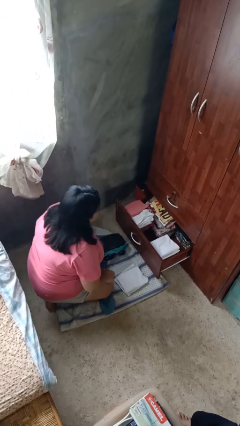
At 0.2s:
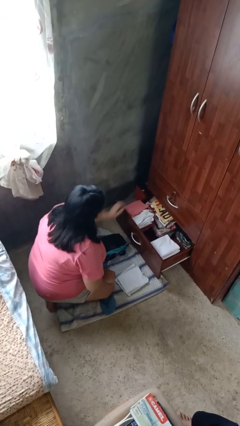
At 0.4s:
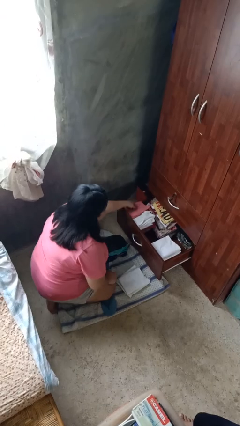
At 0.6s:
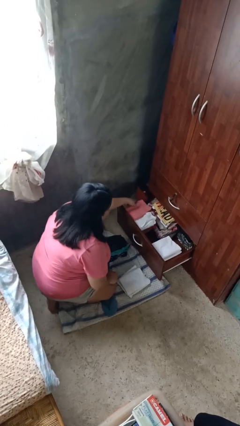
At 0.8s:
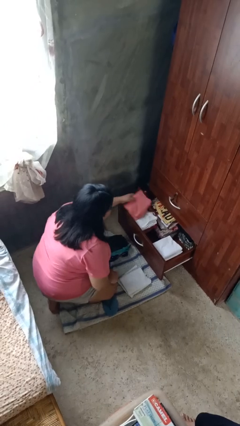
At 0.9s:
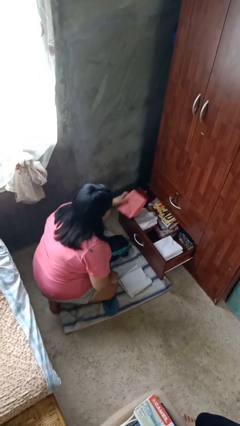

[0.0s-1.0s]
person takes clothes from dresser

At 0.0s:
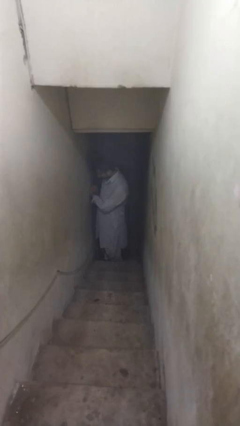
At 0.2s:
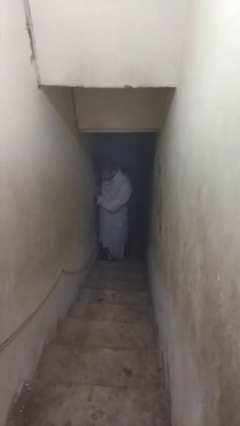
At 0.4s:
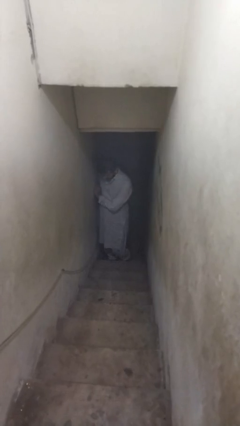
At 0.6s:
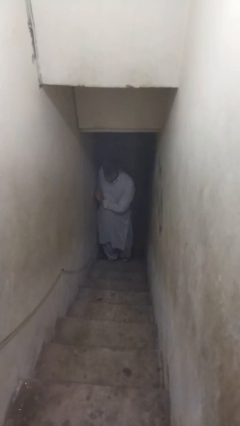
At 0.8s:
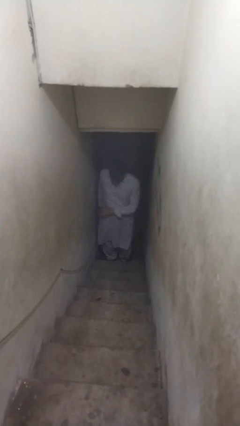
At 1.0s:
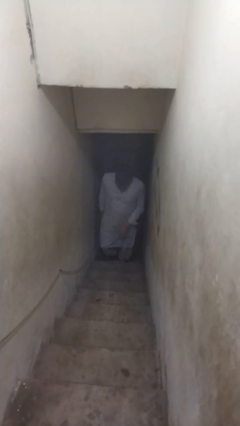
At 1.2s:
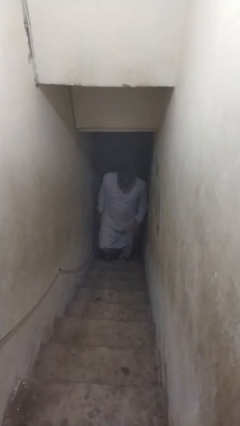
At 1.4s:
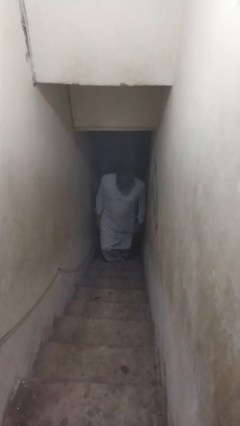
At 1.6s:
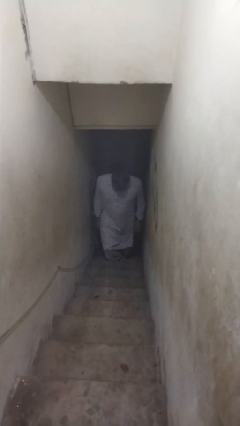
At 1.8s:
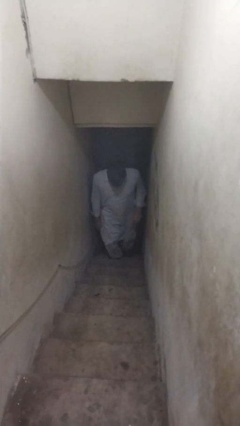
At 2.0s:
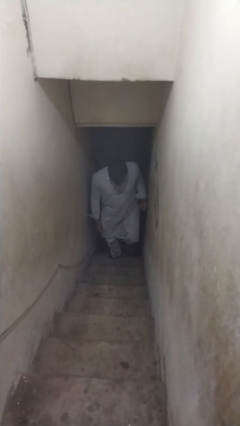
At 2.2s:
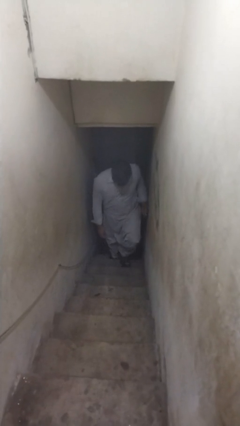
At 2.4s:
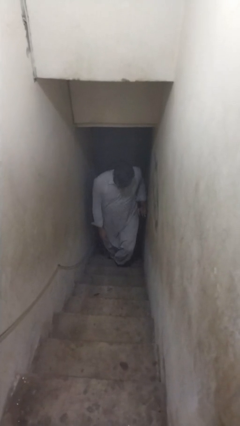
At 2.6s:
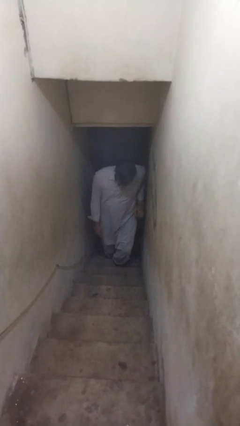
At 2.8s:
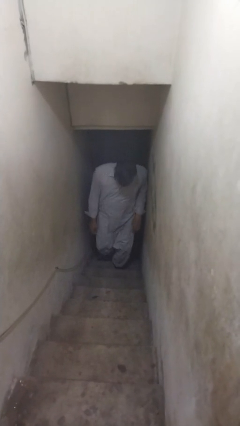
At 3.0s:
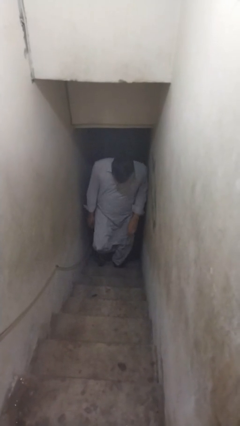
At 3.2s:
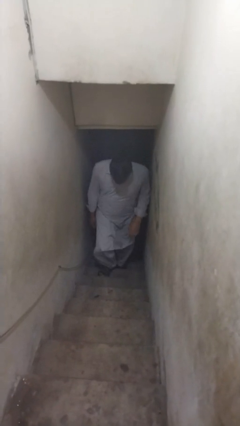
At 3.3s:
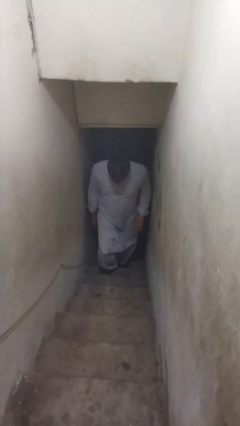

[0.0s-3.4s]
person climbs up stairs

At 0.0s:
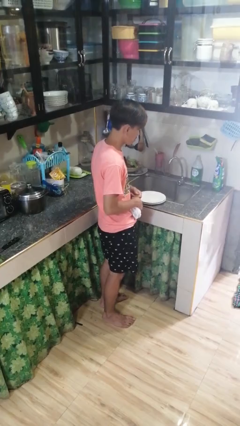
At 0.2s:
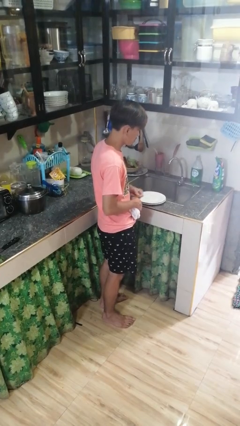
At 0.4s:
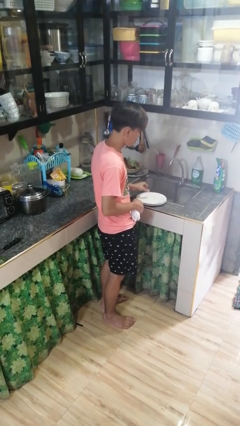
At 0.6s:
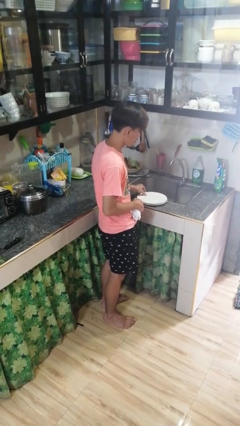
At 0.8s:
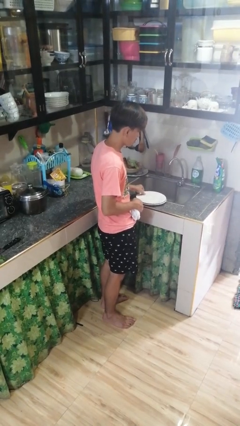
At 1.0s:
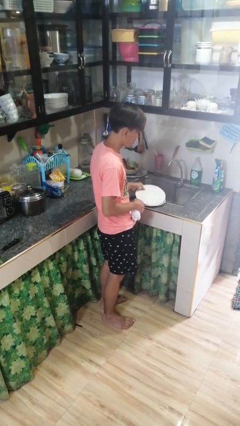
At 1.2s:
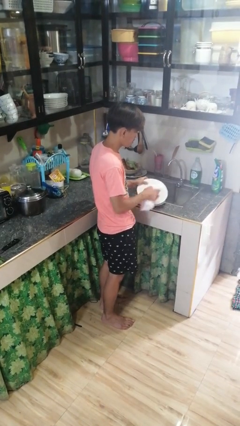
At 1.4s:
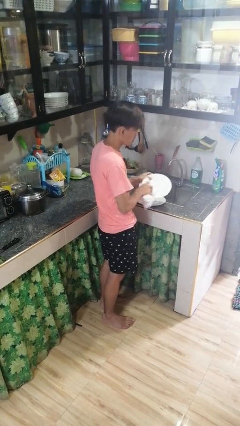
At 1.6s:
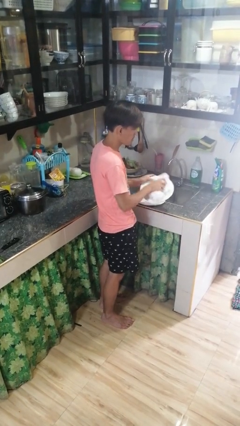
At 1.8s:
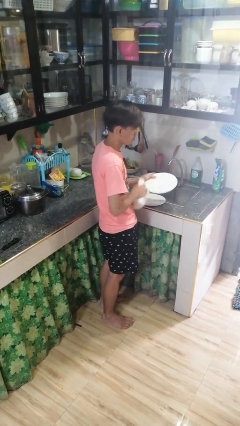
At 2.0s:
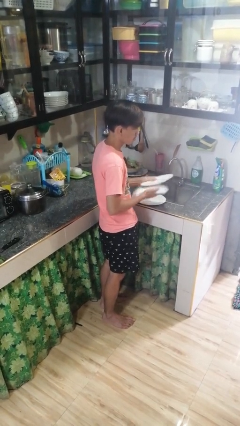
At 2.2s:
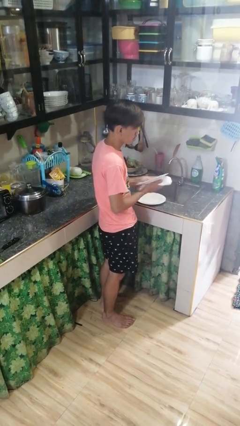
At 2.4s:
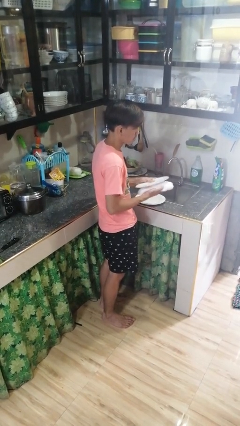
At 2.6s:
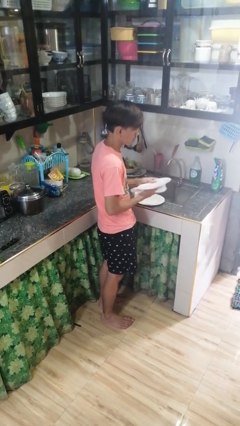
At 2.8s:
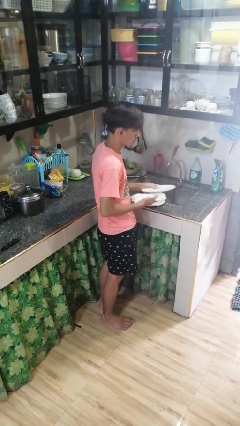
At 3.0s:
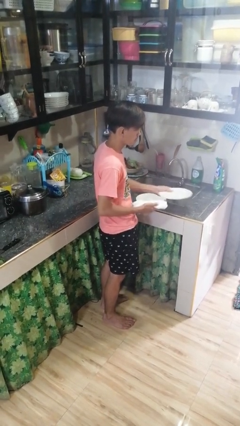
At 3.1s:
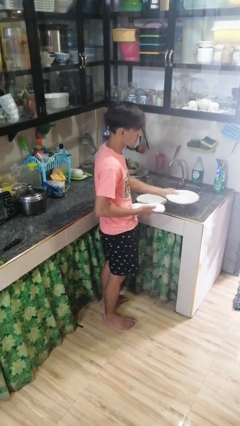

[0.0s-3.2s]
person dries dish

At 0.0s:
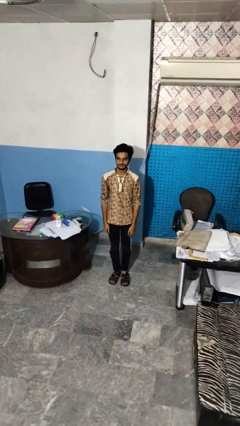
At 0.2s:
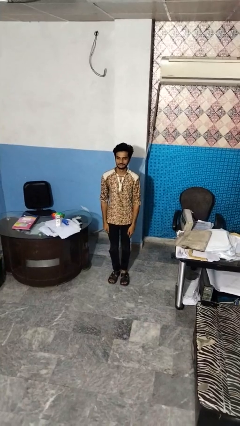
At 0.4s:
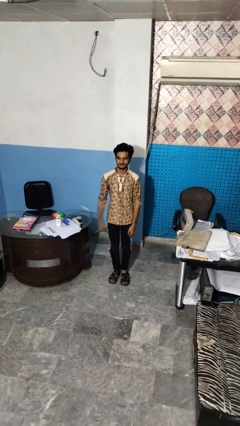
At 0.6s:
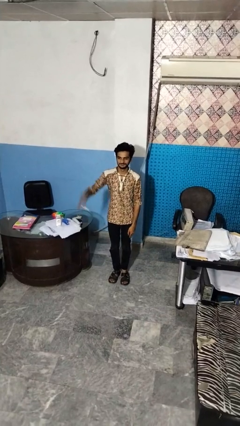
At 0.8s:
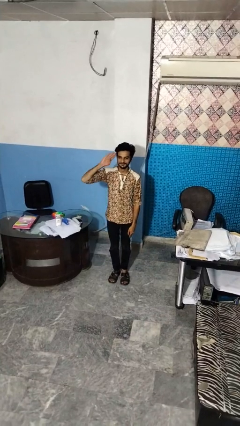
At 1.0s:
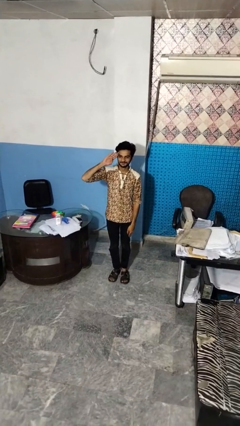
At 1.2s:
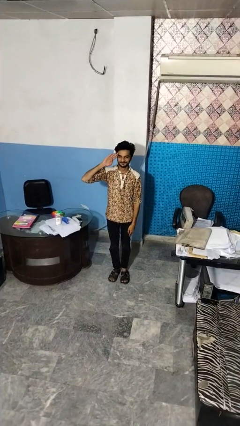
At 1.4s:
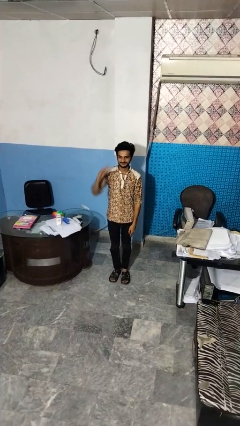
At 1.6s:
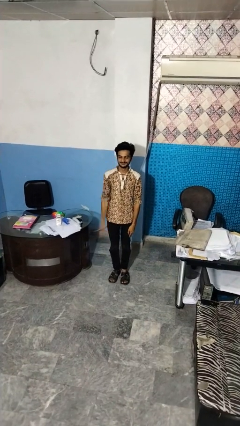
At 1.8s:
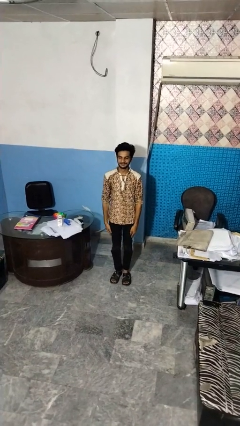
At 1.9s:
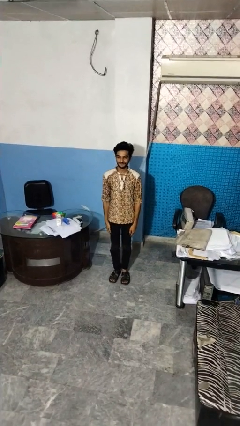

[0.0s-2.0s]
person salutes

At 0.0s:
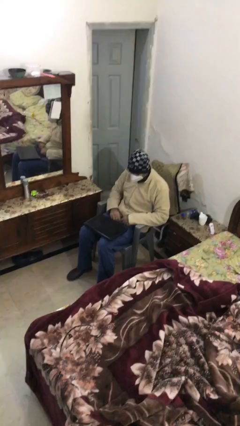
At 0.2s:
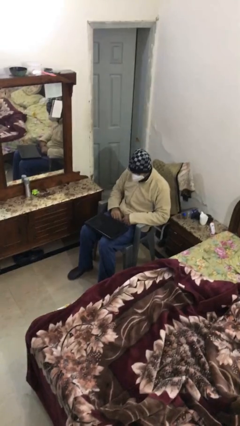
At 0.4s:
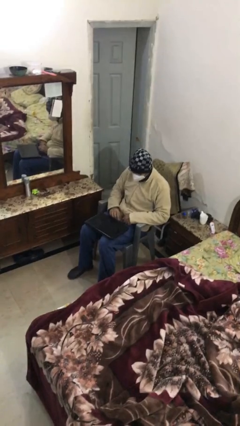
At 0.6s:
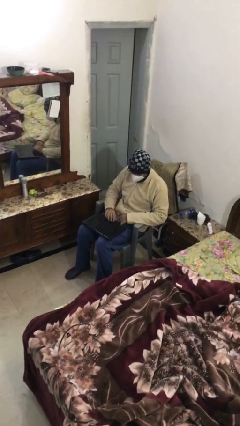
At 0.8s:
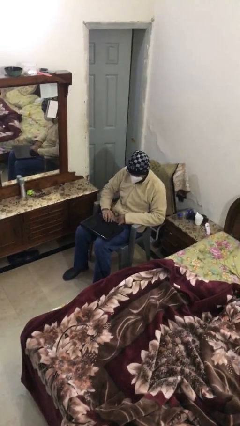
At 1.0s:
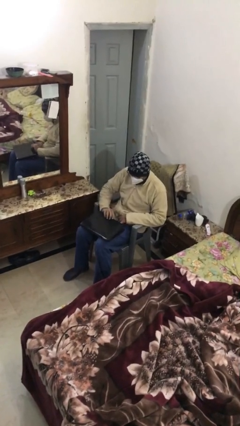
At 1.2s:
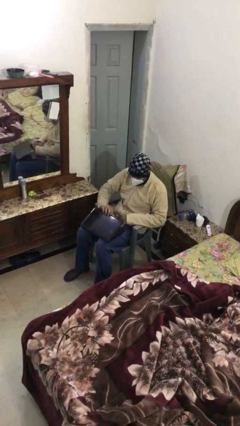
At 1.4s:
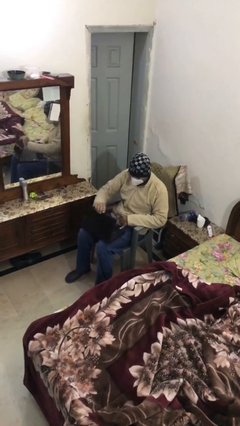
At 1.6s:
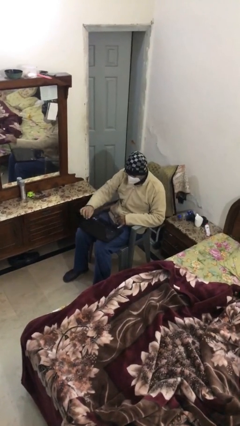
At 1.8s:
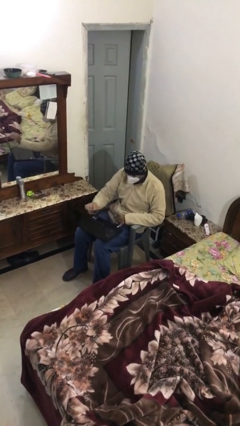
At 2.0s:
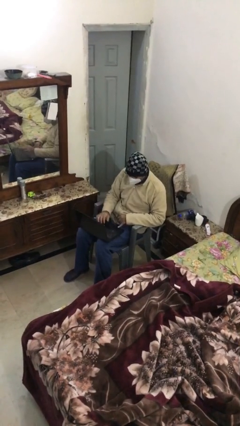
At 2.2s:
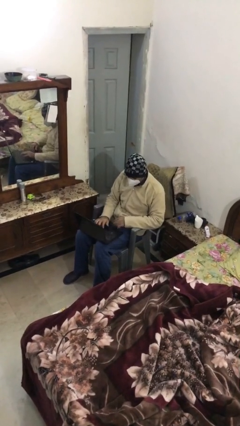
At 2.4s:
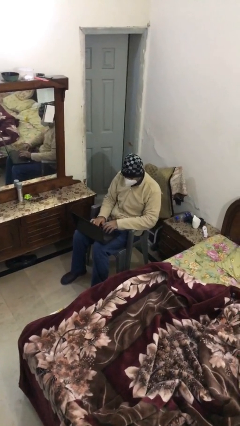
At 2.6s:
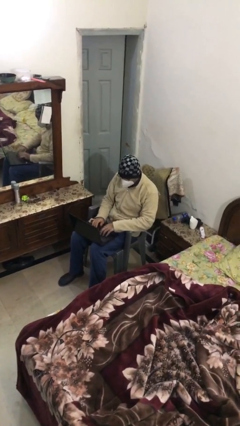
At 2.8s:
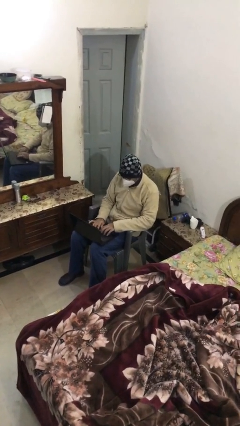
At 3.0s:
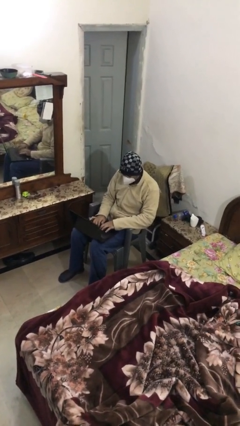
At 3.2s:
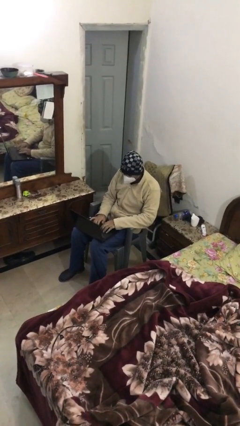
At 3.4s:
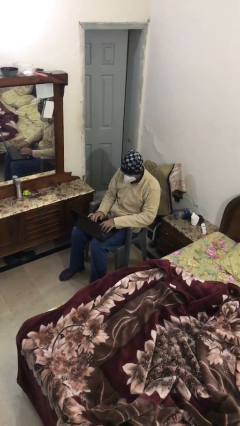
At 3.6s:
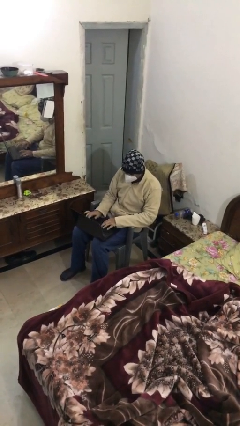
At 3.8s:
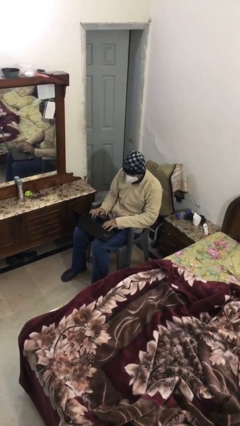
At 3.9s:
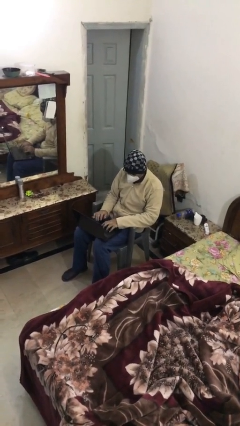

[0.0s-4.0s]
person interacts with laptop

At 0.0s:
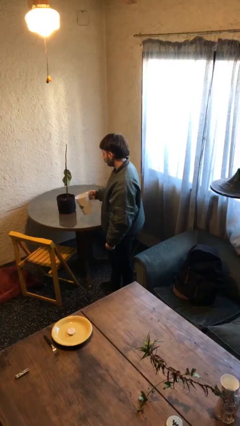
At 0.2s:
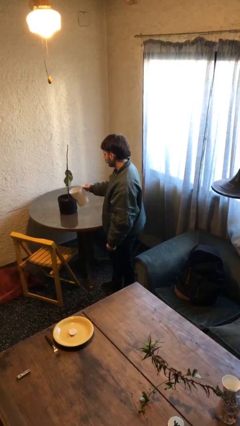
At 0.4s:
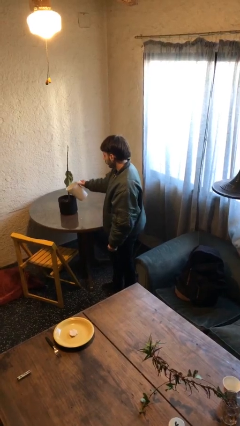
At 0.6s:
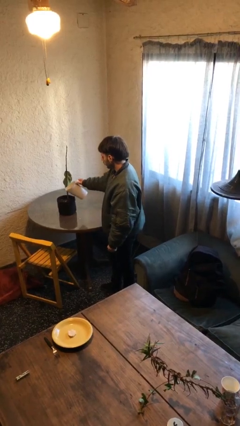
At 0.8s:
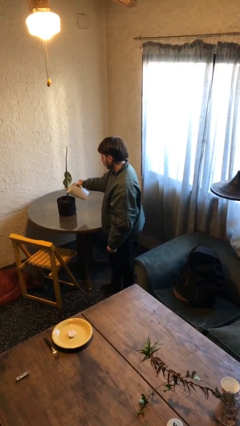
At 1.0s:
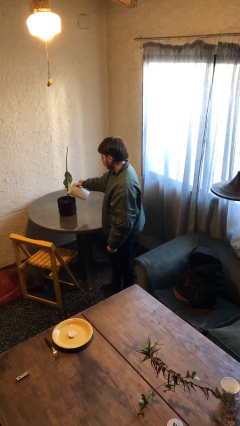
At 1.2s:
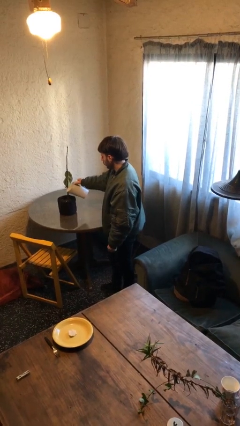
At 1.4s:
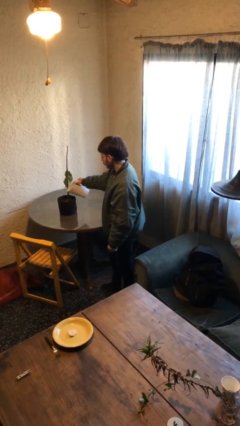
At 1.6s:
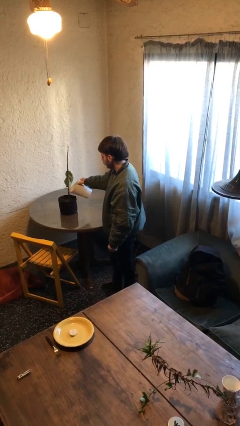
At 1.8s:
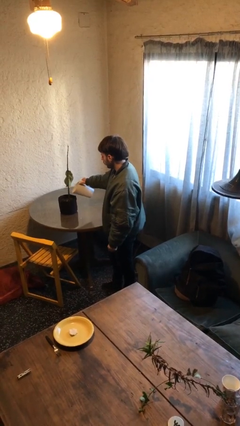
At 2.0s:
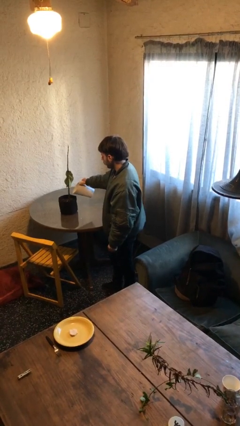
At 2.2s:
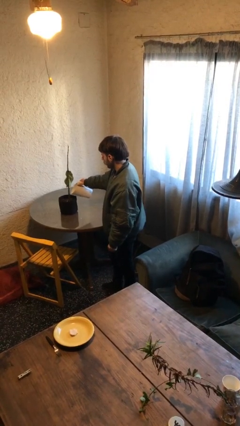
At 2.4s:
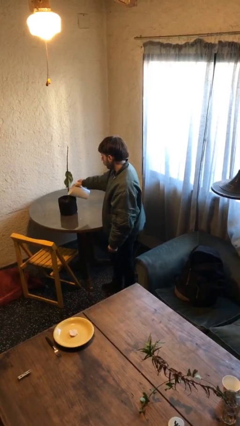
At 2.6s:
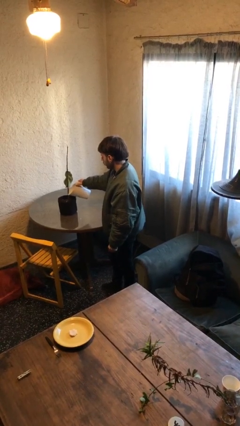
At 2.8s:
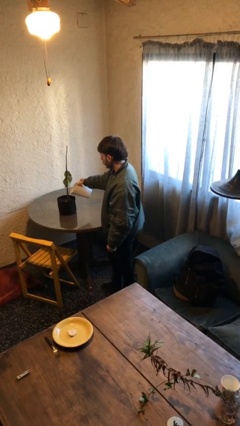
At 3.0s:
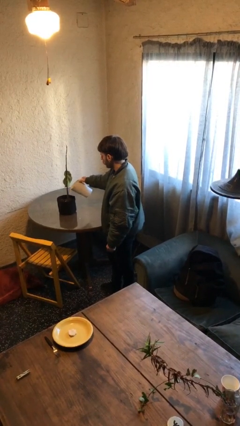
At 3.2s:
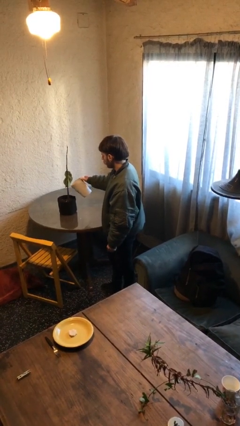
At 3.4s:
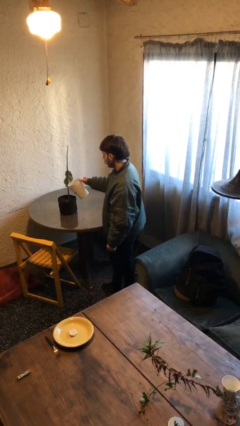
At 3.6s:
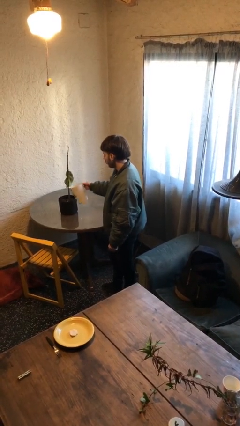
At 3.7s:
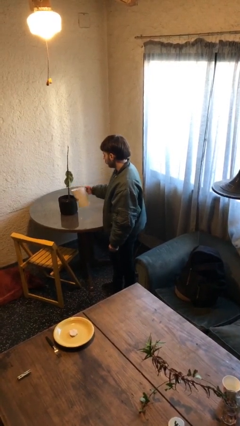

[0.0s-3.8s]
person waters houseplant

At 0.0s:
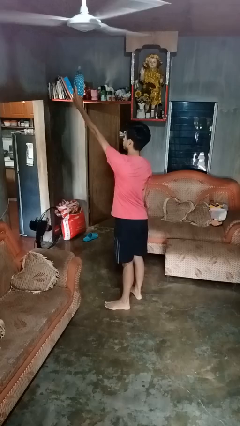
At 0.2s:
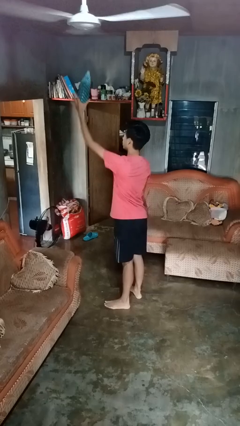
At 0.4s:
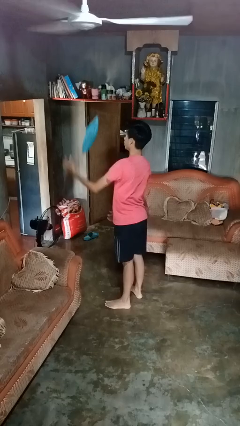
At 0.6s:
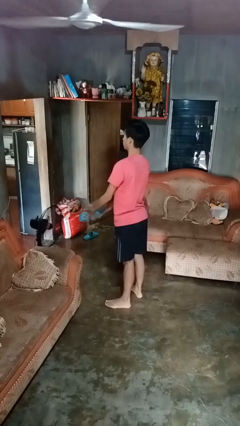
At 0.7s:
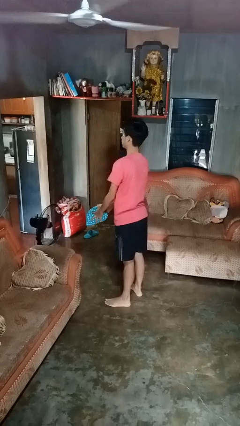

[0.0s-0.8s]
person drops object
